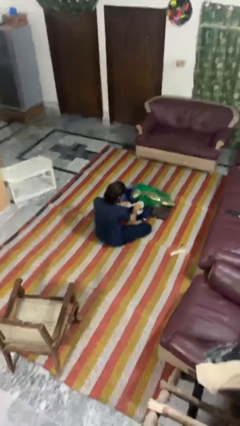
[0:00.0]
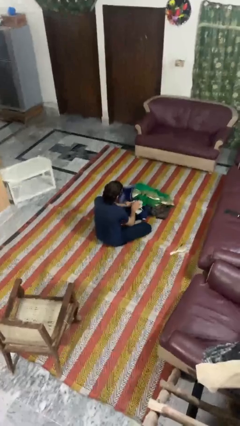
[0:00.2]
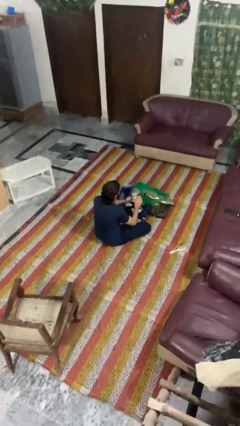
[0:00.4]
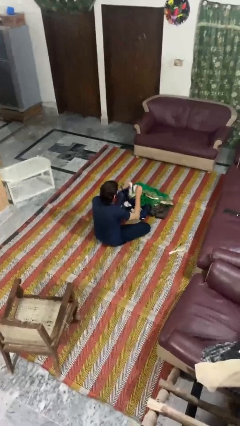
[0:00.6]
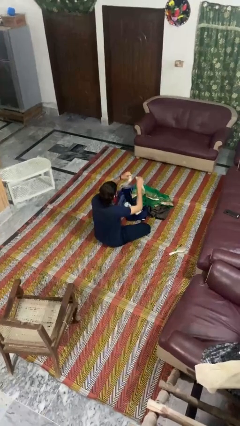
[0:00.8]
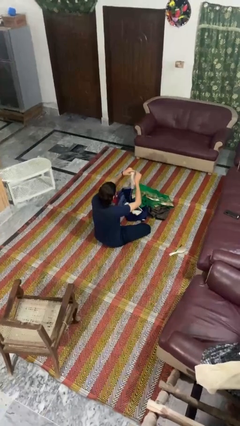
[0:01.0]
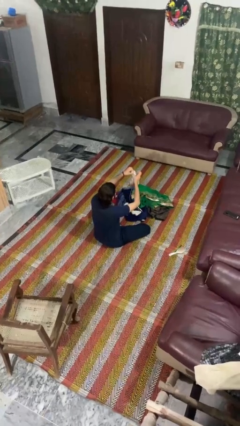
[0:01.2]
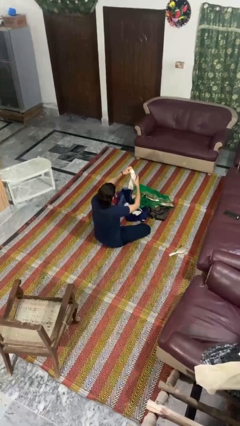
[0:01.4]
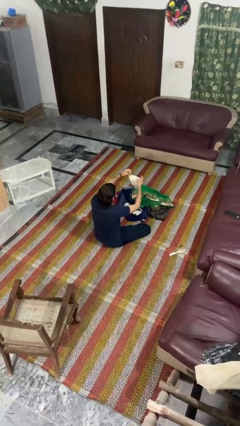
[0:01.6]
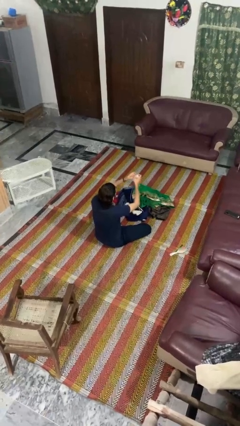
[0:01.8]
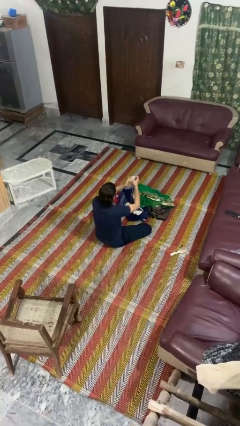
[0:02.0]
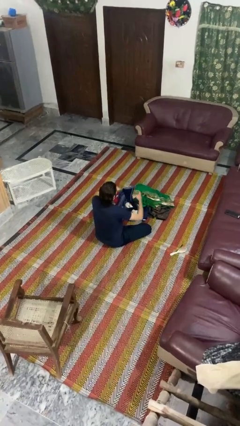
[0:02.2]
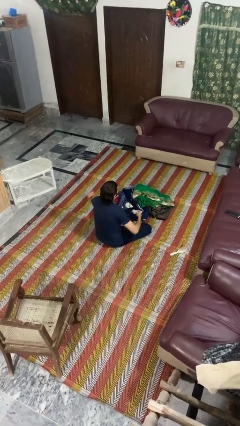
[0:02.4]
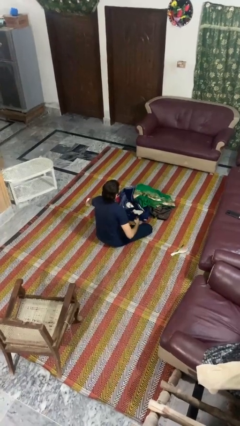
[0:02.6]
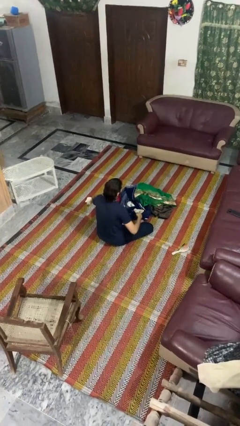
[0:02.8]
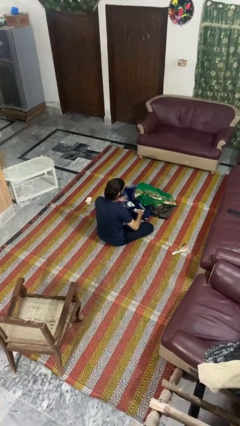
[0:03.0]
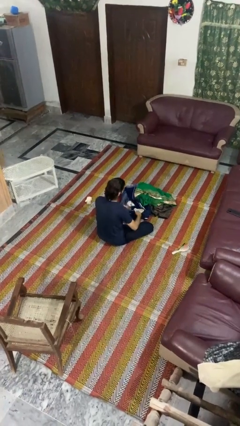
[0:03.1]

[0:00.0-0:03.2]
person folds socks

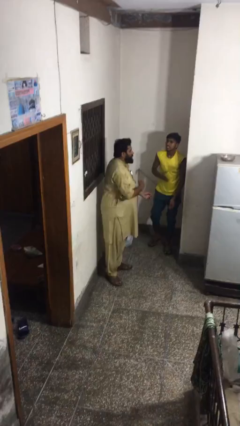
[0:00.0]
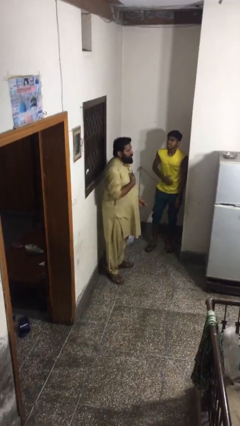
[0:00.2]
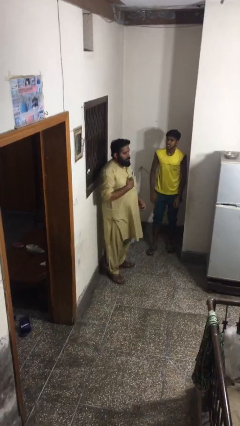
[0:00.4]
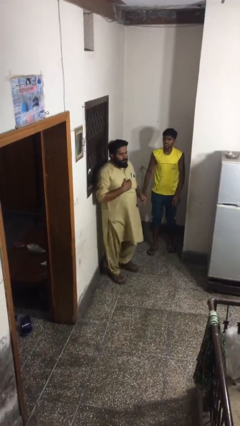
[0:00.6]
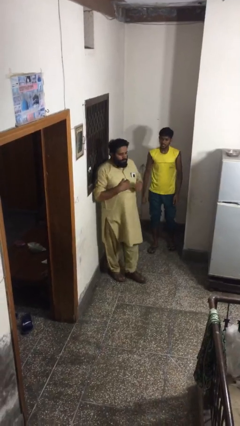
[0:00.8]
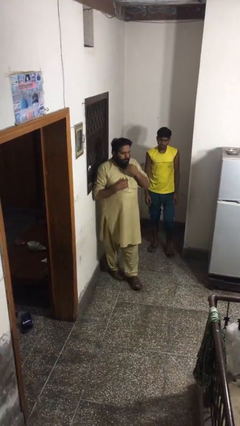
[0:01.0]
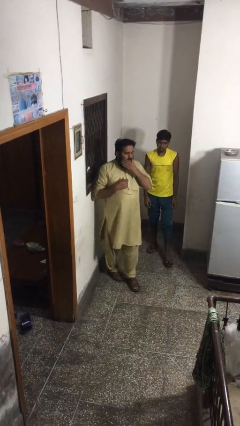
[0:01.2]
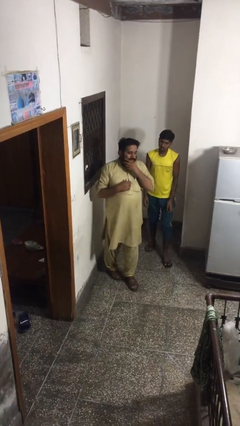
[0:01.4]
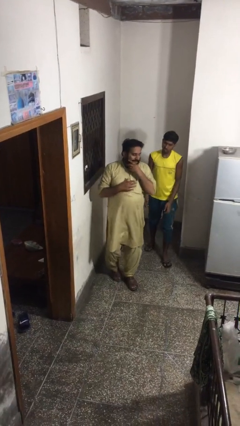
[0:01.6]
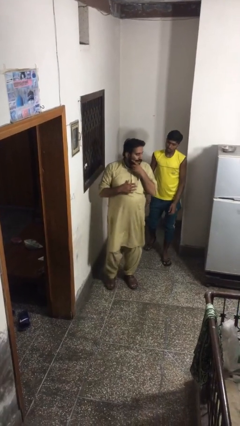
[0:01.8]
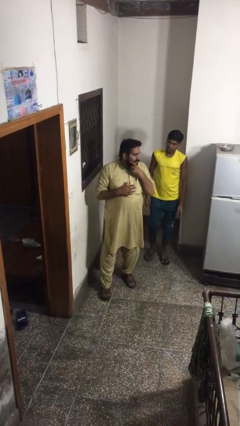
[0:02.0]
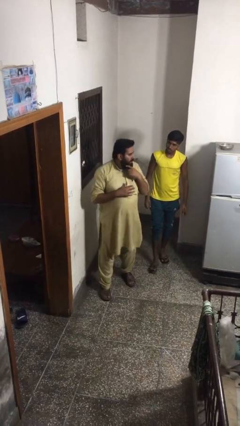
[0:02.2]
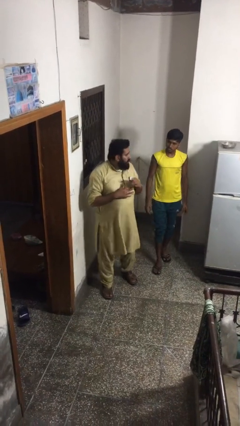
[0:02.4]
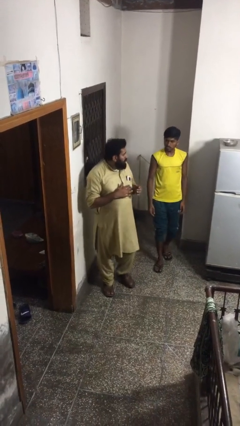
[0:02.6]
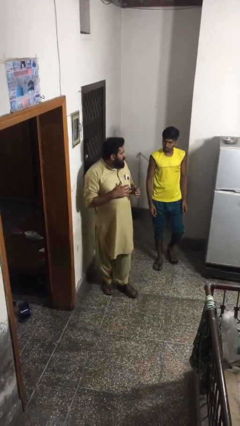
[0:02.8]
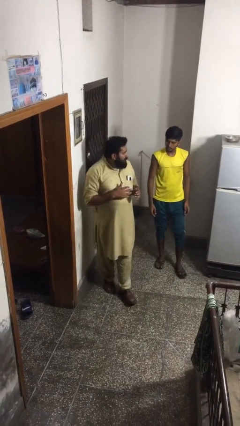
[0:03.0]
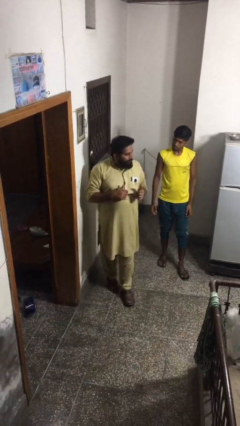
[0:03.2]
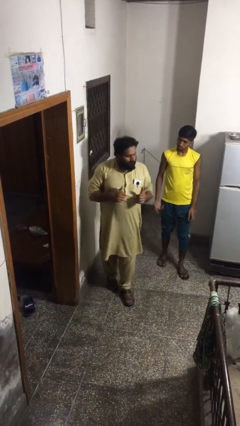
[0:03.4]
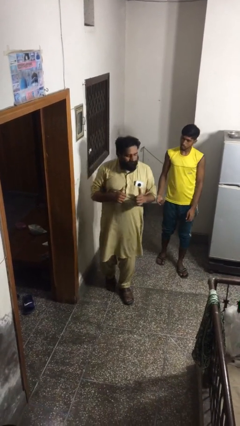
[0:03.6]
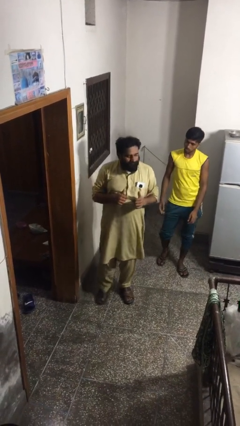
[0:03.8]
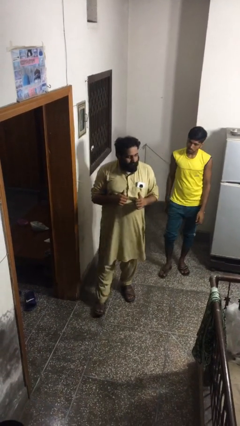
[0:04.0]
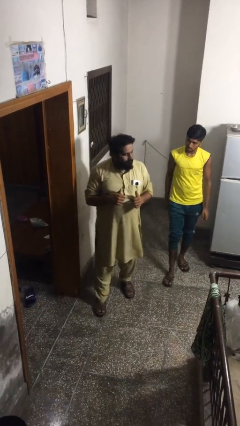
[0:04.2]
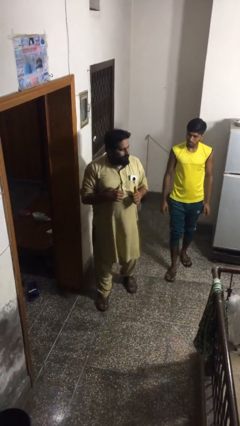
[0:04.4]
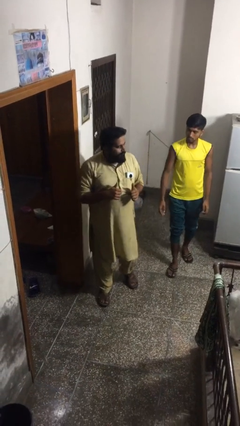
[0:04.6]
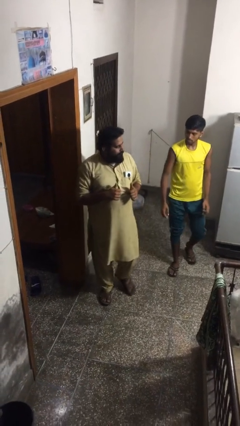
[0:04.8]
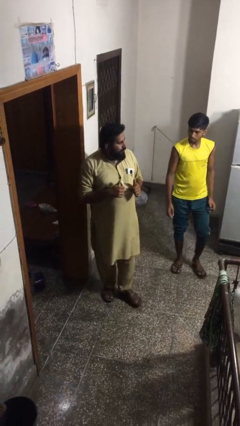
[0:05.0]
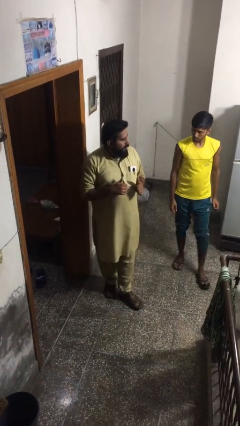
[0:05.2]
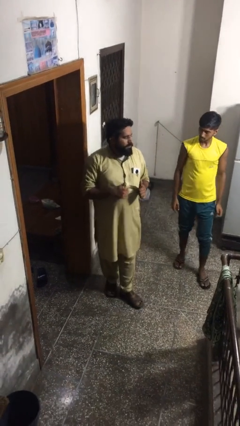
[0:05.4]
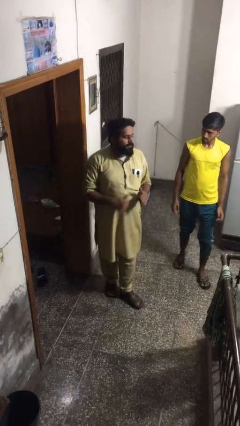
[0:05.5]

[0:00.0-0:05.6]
person talks to person

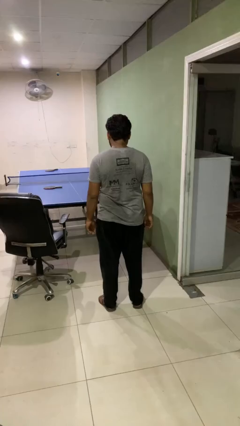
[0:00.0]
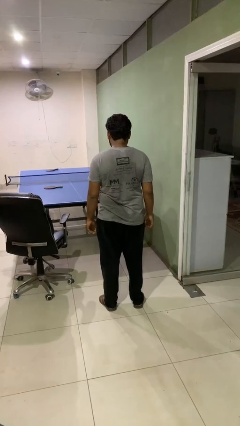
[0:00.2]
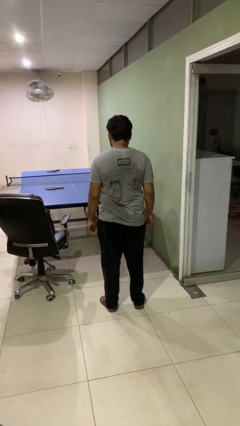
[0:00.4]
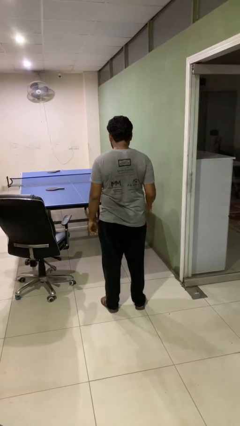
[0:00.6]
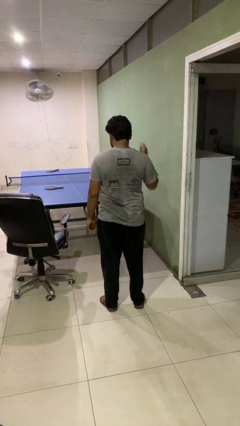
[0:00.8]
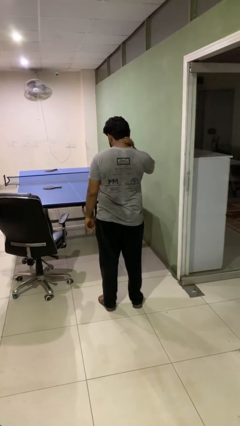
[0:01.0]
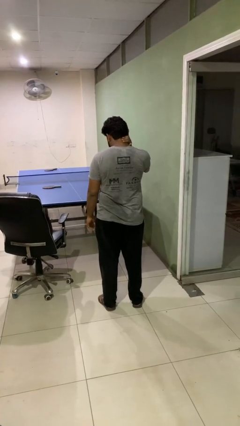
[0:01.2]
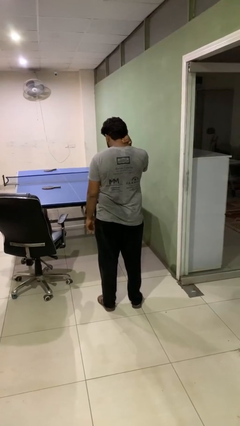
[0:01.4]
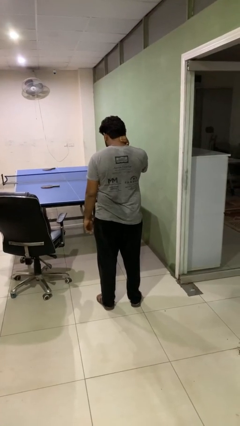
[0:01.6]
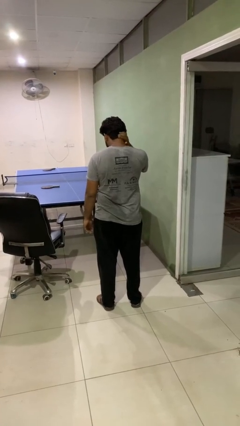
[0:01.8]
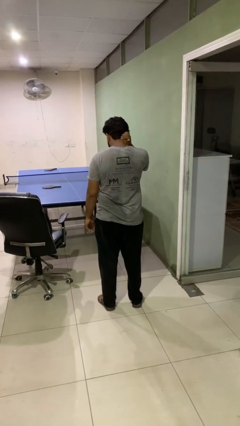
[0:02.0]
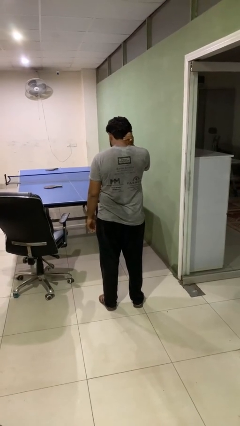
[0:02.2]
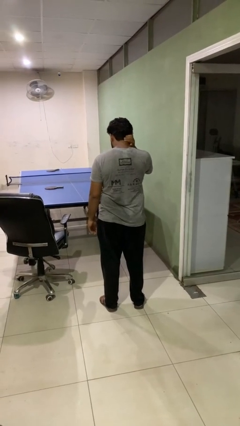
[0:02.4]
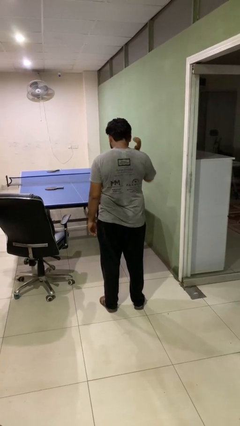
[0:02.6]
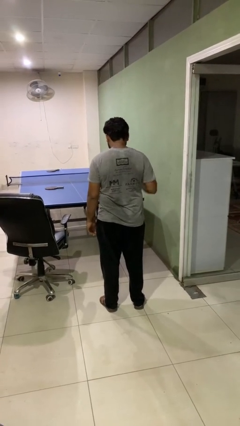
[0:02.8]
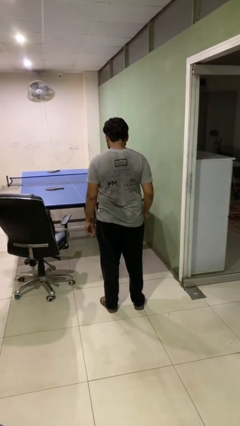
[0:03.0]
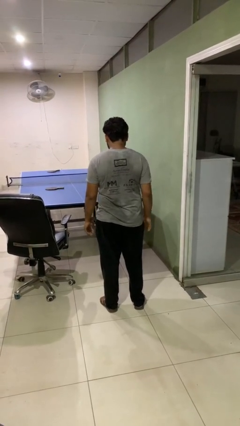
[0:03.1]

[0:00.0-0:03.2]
person rubs neck

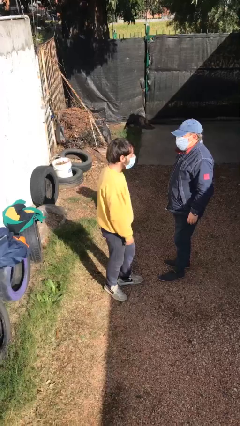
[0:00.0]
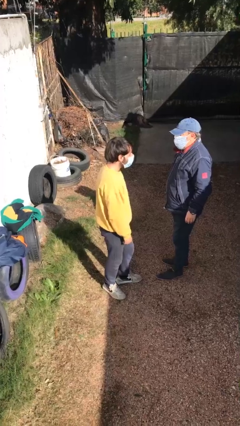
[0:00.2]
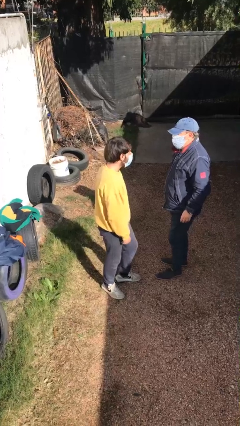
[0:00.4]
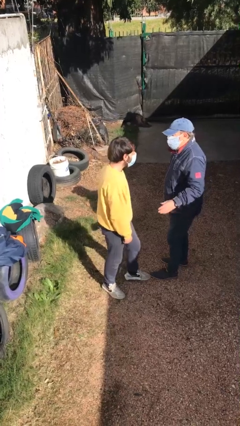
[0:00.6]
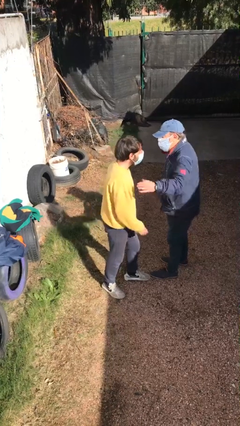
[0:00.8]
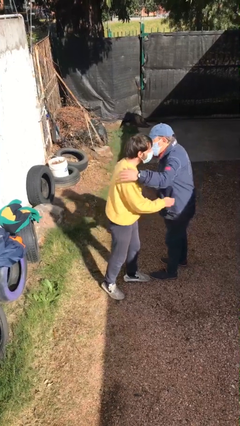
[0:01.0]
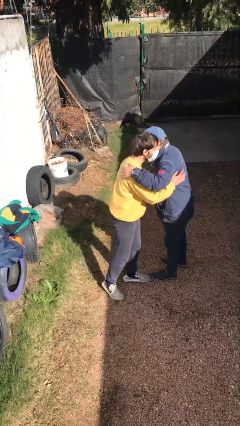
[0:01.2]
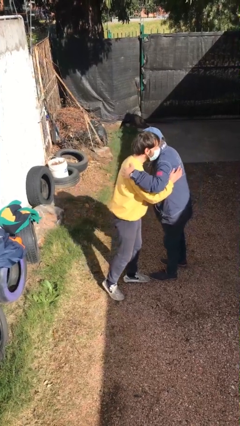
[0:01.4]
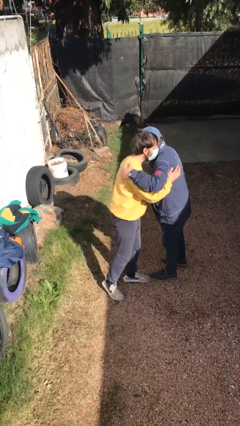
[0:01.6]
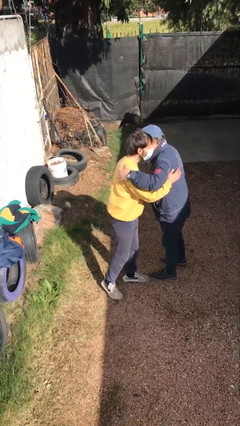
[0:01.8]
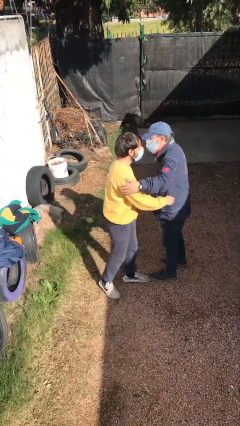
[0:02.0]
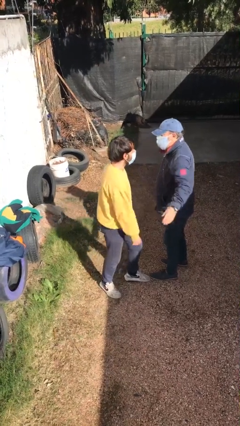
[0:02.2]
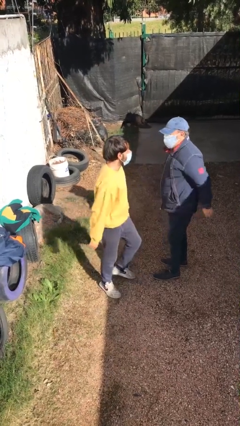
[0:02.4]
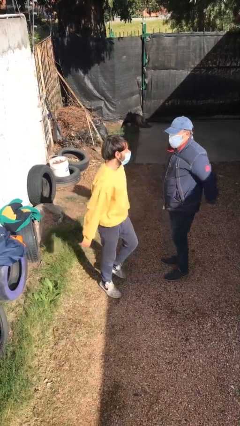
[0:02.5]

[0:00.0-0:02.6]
person kisses cheek of person

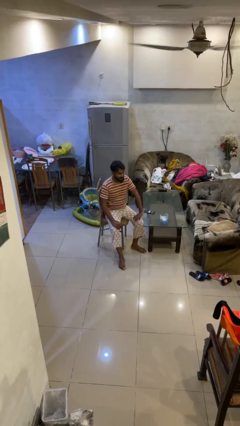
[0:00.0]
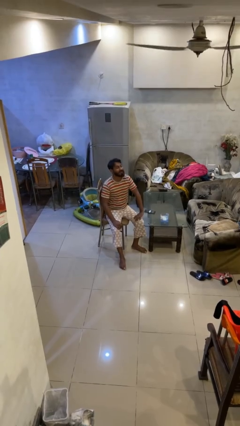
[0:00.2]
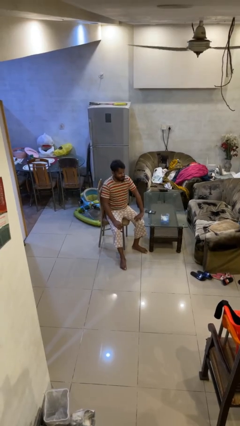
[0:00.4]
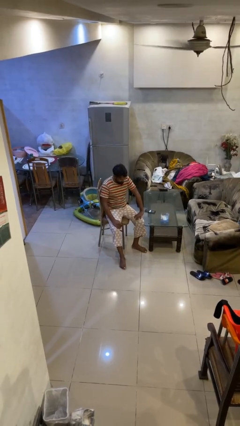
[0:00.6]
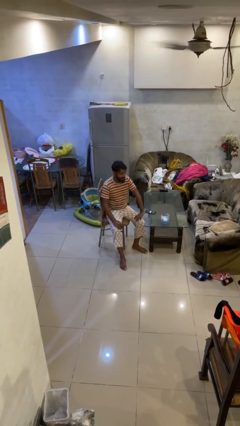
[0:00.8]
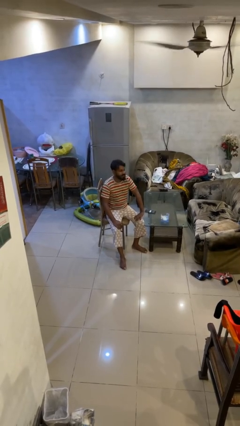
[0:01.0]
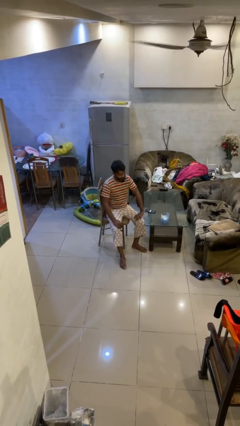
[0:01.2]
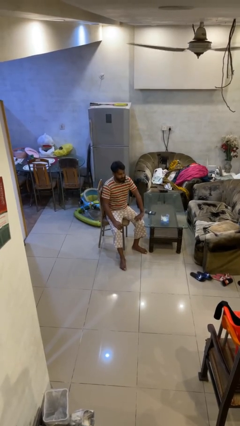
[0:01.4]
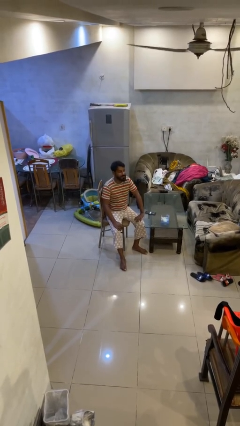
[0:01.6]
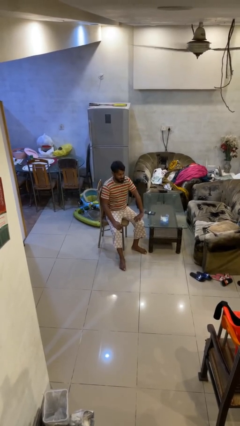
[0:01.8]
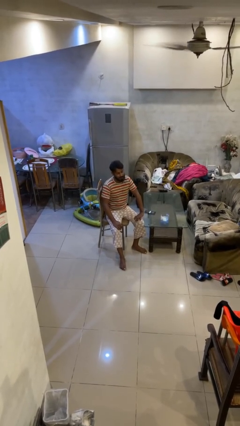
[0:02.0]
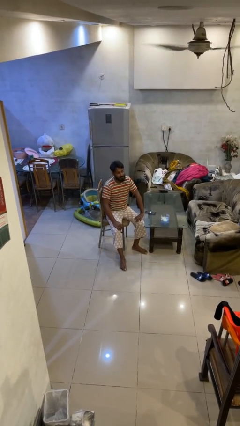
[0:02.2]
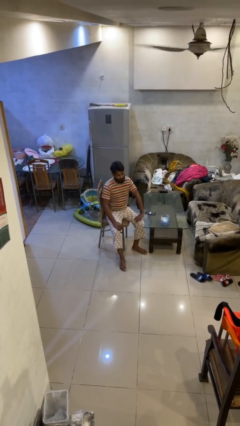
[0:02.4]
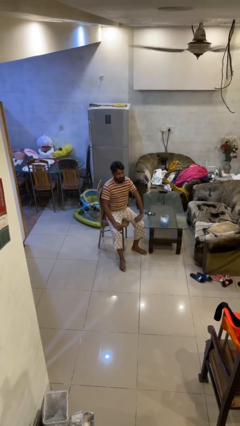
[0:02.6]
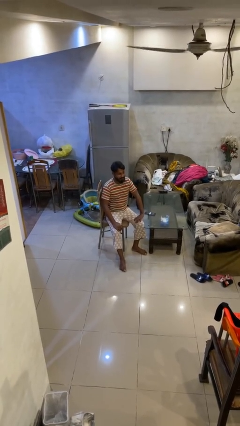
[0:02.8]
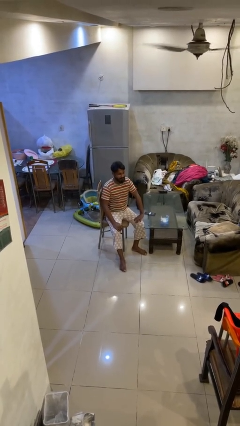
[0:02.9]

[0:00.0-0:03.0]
person nods head
